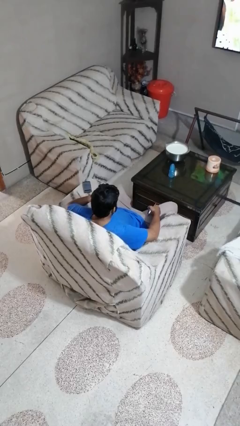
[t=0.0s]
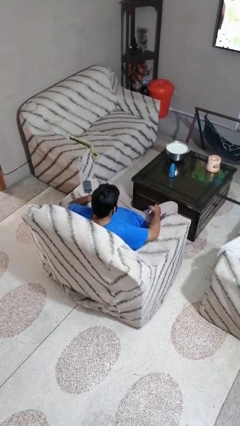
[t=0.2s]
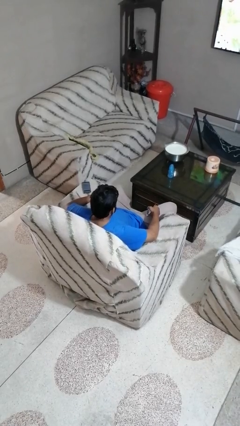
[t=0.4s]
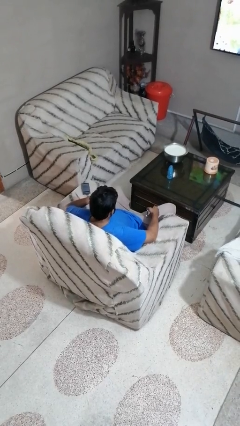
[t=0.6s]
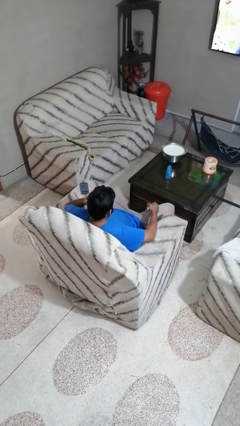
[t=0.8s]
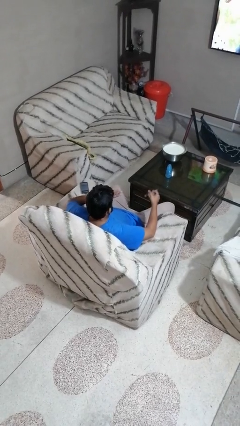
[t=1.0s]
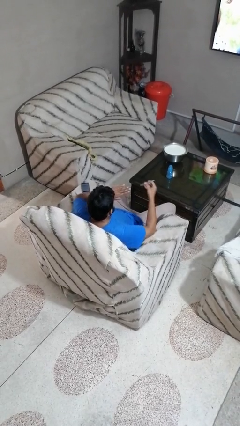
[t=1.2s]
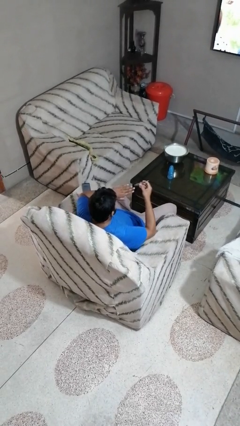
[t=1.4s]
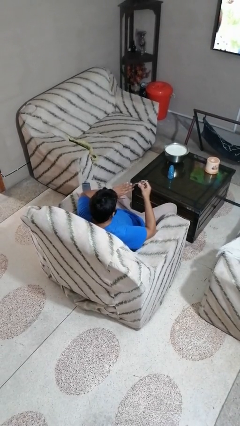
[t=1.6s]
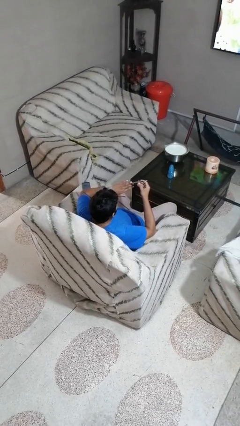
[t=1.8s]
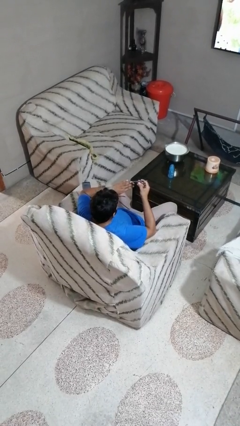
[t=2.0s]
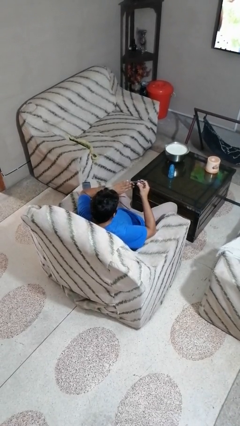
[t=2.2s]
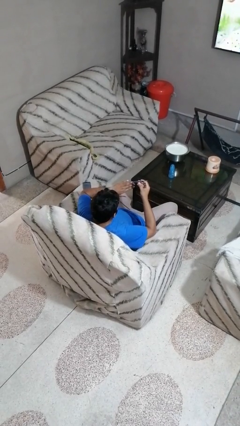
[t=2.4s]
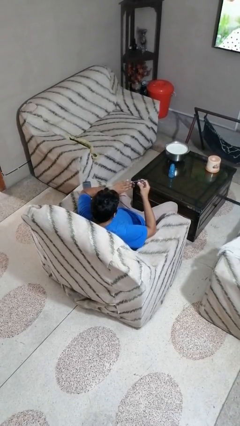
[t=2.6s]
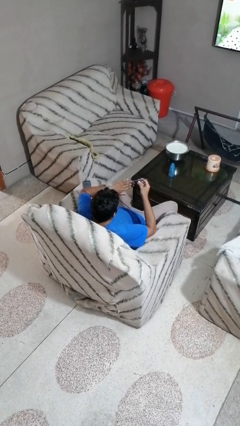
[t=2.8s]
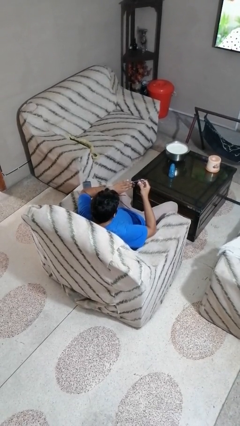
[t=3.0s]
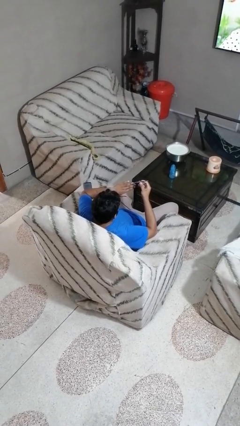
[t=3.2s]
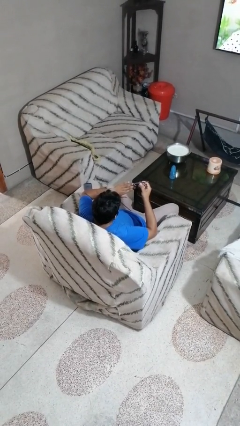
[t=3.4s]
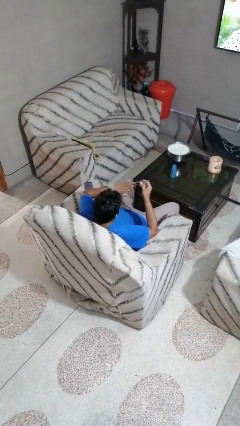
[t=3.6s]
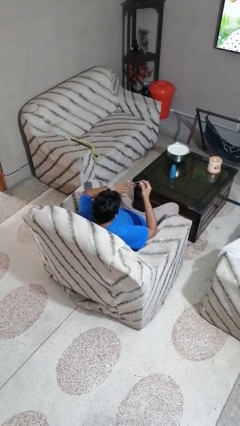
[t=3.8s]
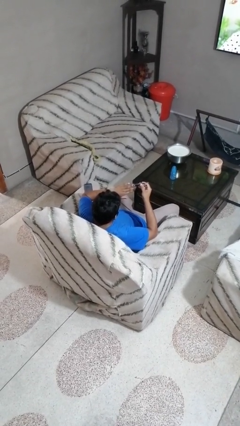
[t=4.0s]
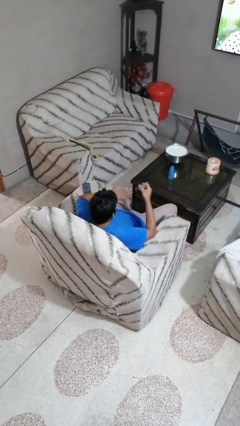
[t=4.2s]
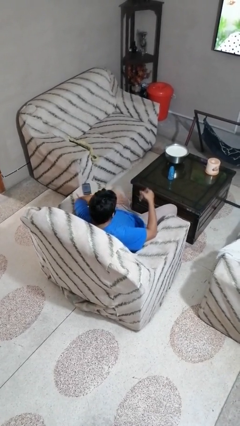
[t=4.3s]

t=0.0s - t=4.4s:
person clips fingernails

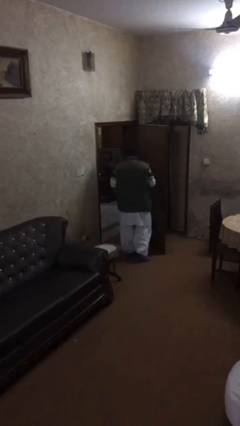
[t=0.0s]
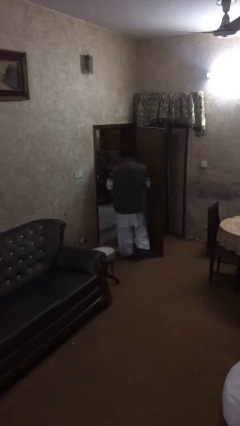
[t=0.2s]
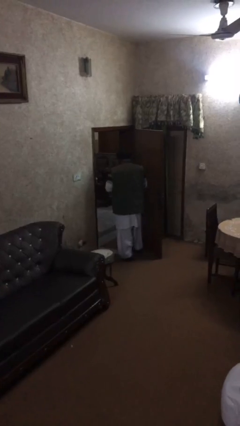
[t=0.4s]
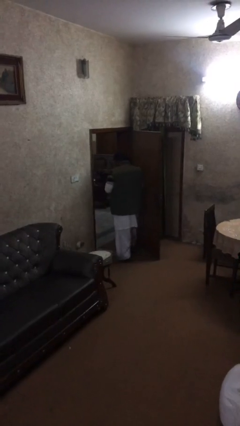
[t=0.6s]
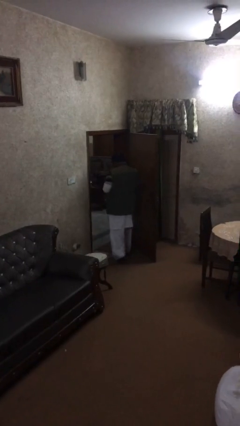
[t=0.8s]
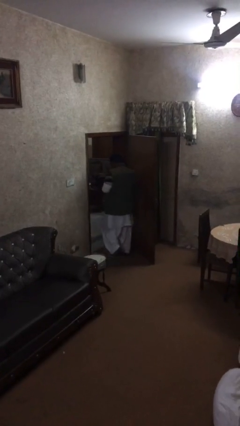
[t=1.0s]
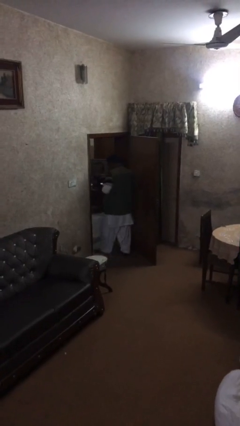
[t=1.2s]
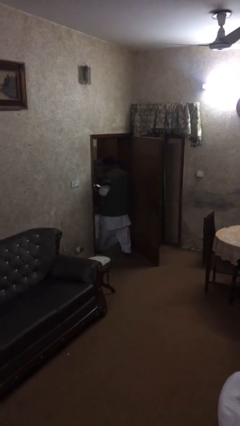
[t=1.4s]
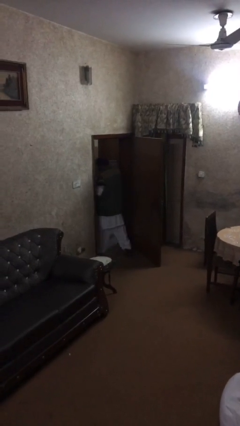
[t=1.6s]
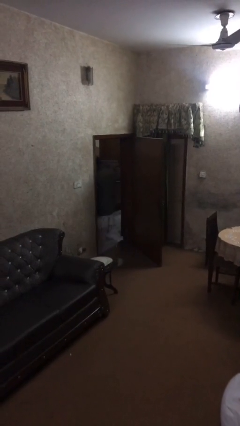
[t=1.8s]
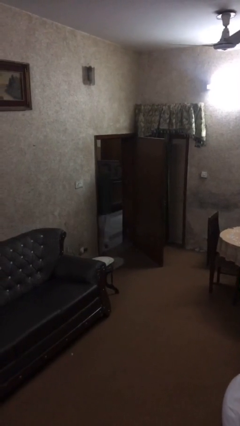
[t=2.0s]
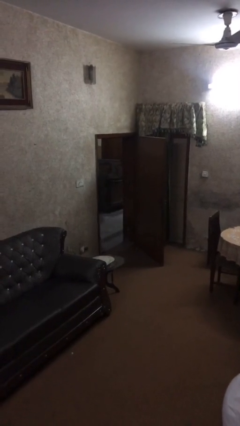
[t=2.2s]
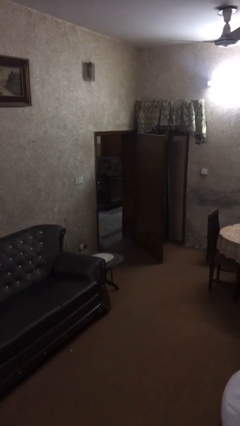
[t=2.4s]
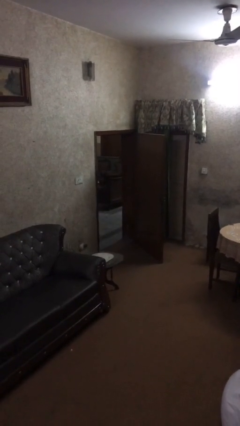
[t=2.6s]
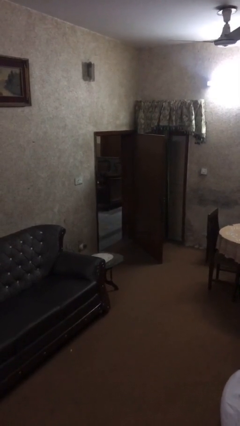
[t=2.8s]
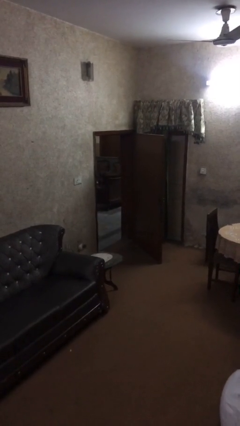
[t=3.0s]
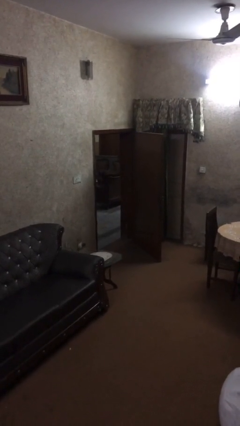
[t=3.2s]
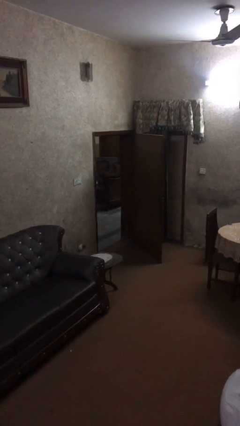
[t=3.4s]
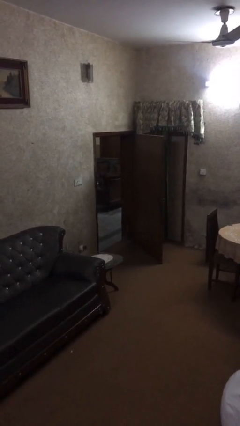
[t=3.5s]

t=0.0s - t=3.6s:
person exits scene through structure

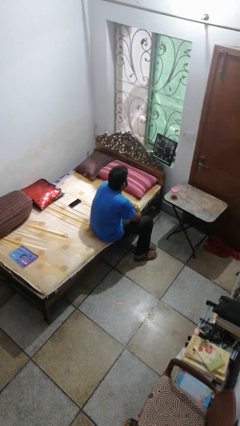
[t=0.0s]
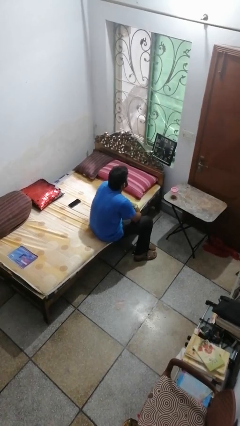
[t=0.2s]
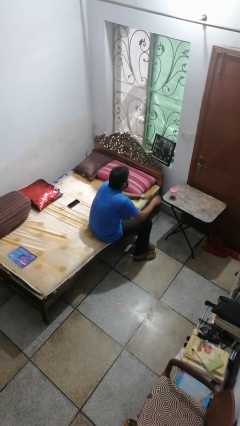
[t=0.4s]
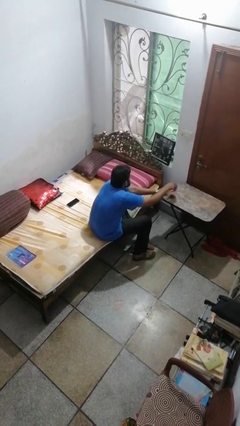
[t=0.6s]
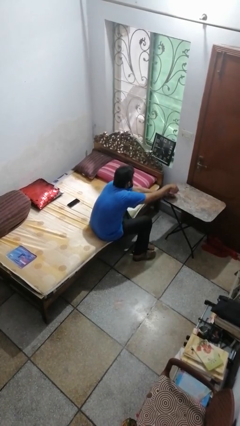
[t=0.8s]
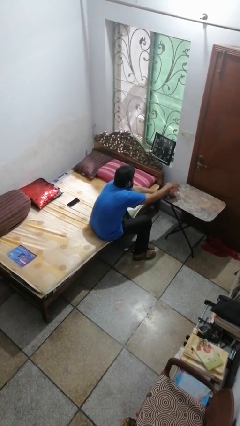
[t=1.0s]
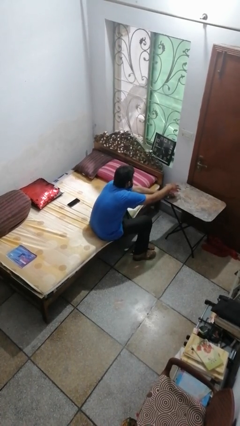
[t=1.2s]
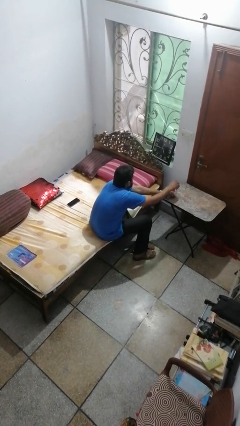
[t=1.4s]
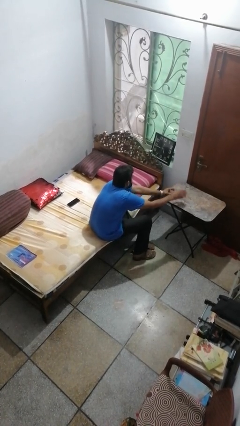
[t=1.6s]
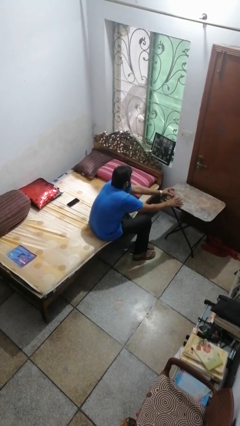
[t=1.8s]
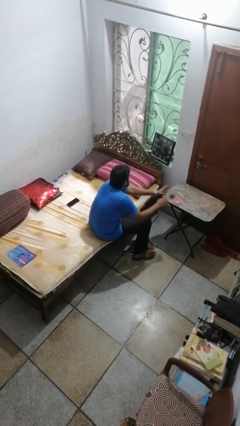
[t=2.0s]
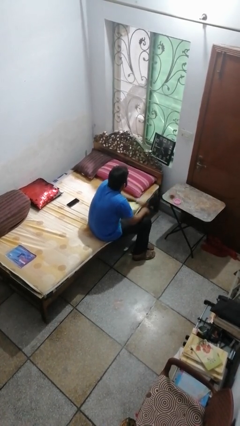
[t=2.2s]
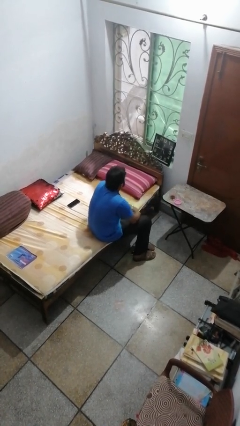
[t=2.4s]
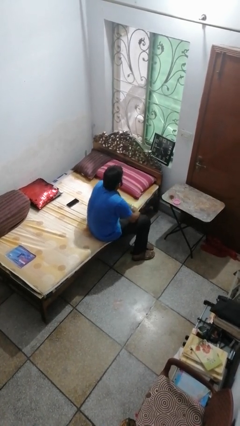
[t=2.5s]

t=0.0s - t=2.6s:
person opens jar

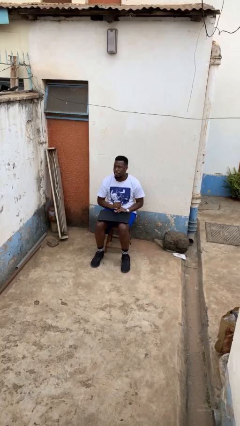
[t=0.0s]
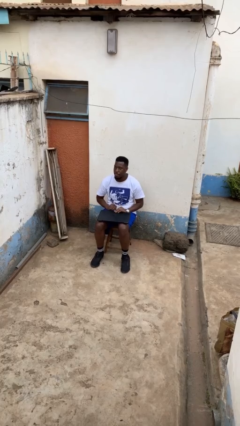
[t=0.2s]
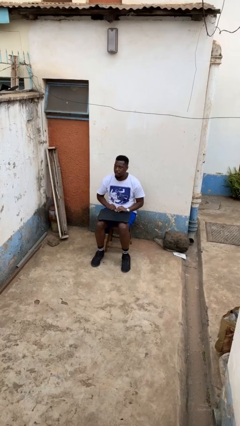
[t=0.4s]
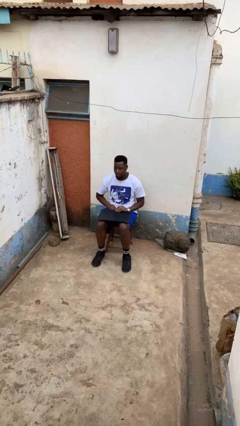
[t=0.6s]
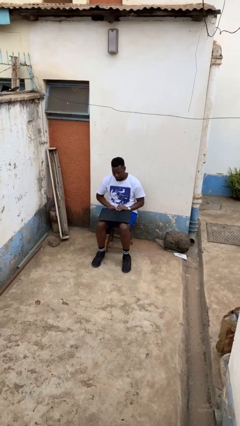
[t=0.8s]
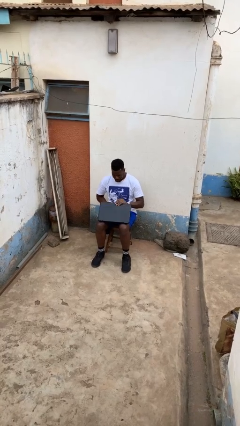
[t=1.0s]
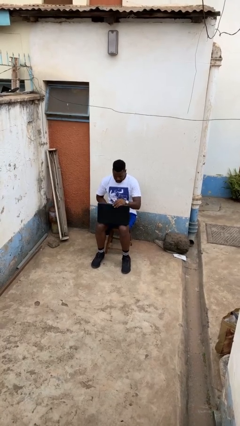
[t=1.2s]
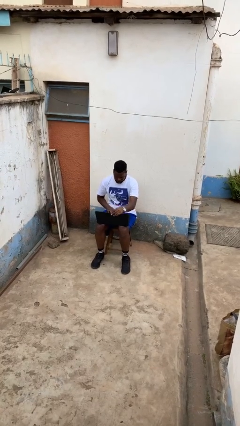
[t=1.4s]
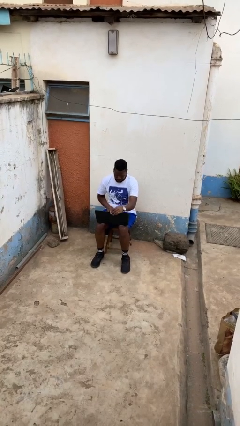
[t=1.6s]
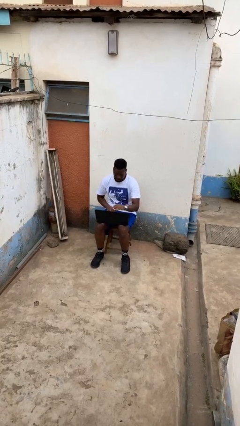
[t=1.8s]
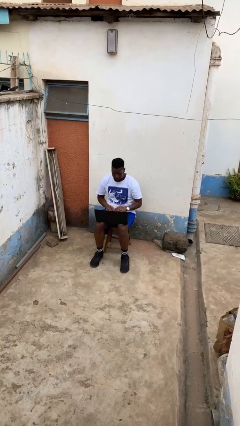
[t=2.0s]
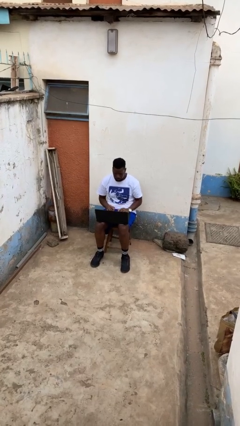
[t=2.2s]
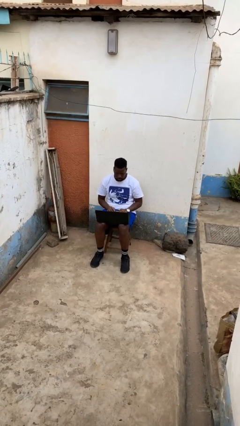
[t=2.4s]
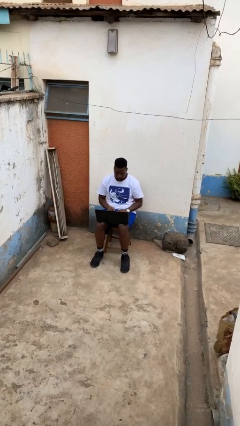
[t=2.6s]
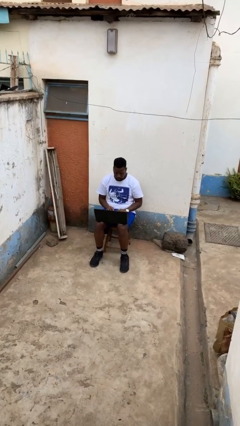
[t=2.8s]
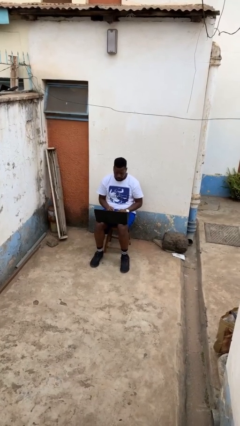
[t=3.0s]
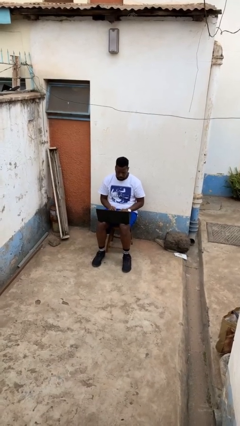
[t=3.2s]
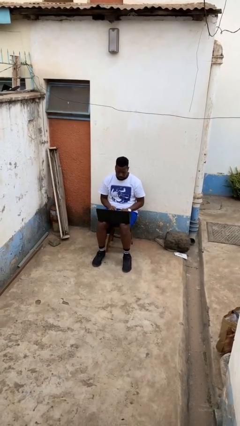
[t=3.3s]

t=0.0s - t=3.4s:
person opens laptop

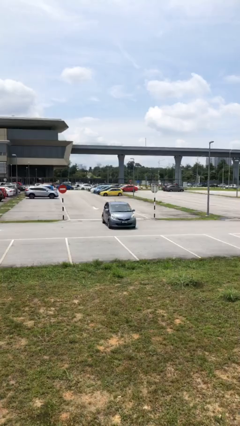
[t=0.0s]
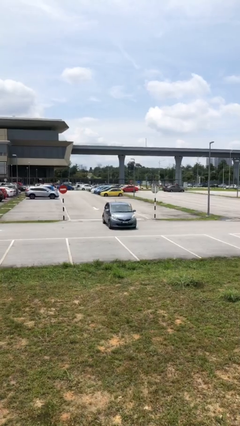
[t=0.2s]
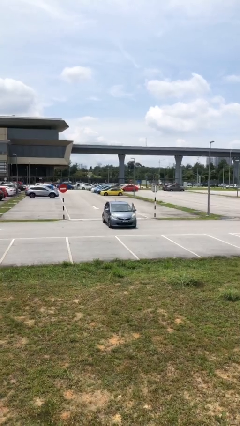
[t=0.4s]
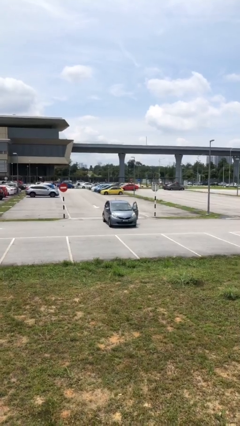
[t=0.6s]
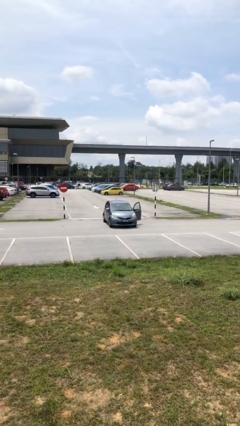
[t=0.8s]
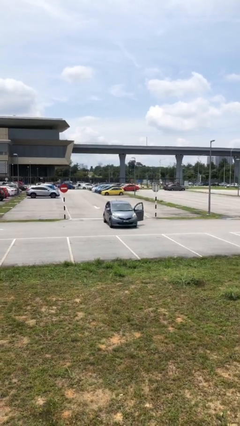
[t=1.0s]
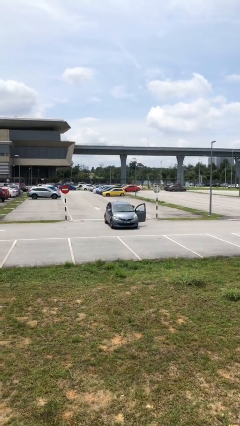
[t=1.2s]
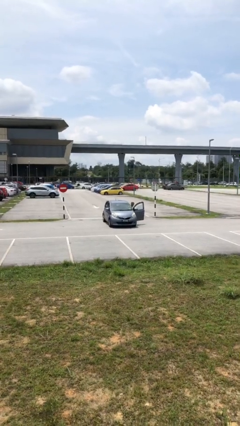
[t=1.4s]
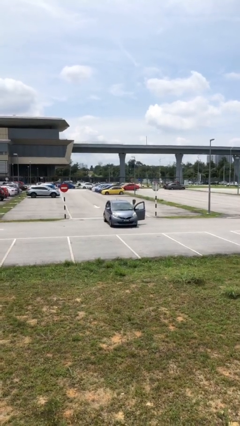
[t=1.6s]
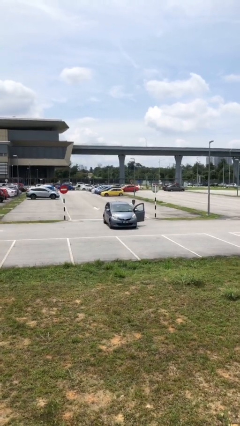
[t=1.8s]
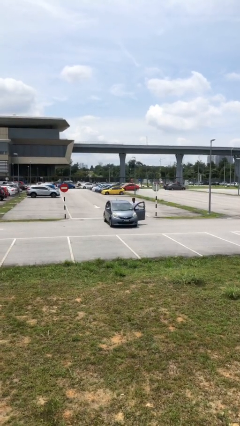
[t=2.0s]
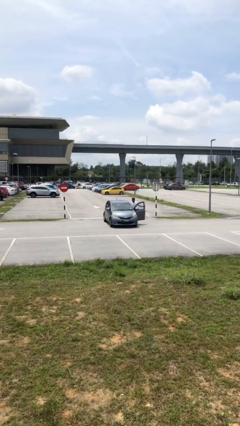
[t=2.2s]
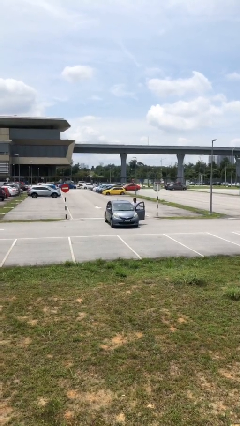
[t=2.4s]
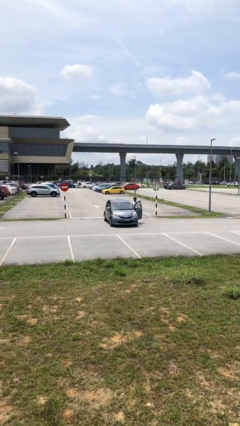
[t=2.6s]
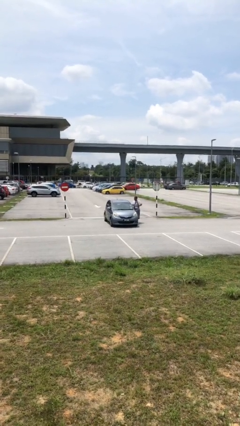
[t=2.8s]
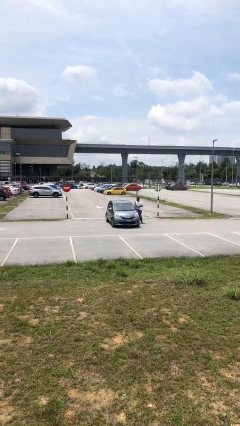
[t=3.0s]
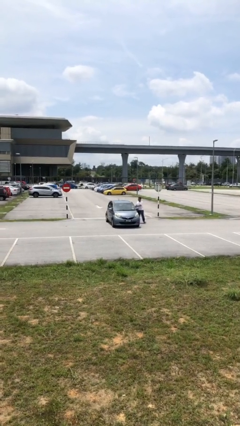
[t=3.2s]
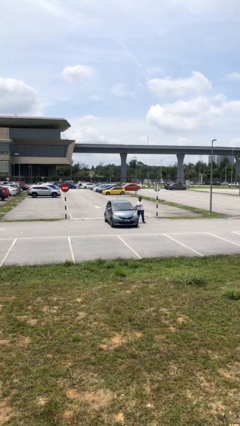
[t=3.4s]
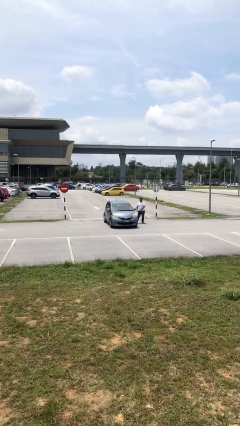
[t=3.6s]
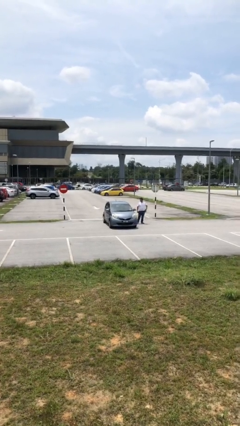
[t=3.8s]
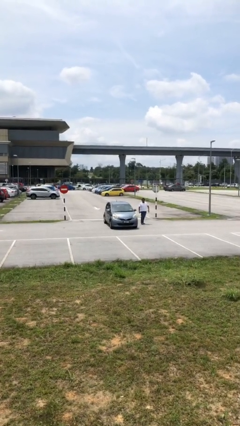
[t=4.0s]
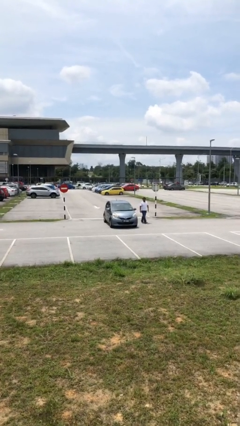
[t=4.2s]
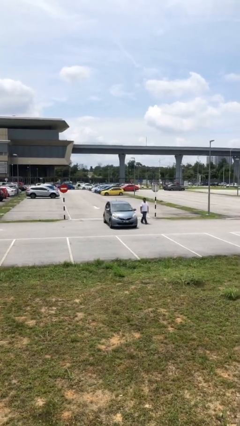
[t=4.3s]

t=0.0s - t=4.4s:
car drops off person
